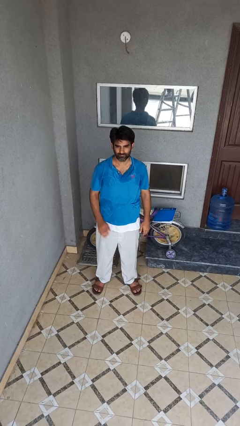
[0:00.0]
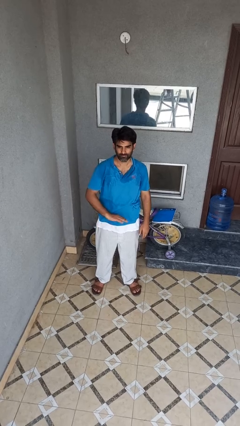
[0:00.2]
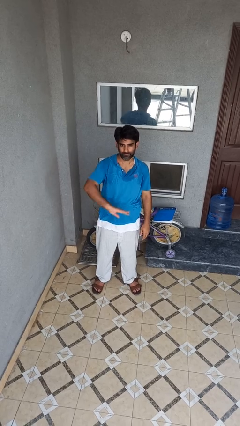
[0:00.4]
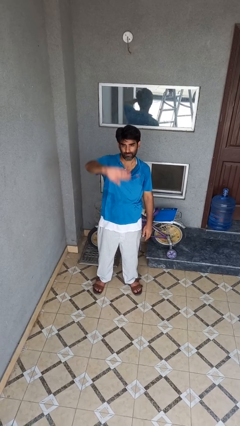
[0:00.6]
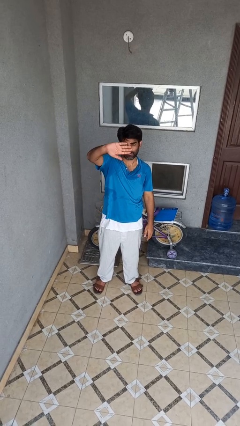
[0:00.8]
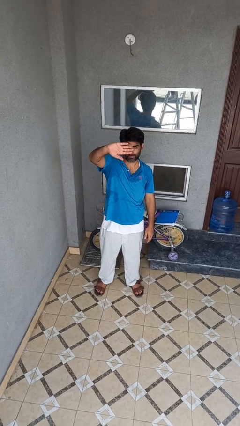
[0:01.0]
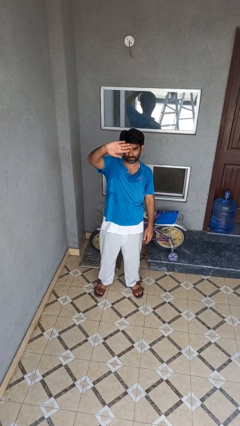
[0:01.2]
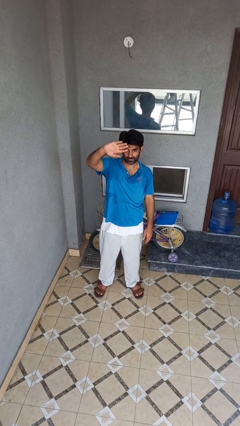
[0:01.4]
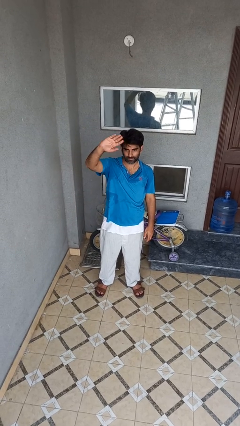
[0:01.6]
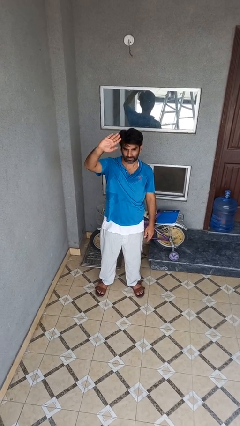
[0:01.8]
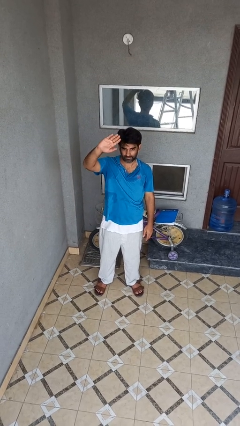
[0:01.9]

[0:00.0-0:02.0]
person gestures swipe up

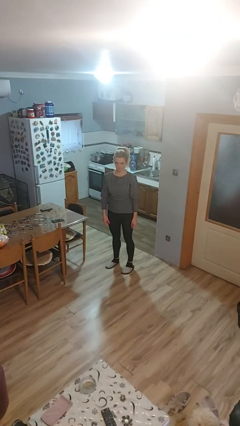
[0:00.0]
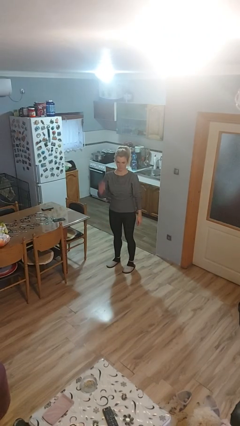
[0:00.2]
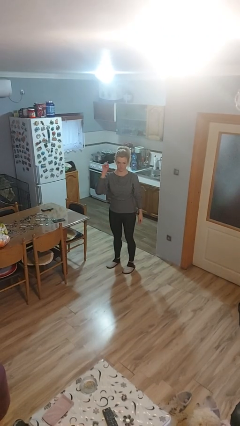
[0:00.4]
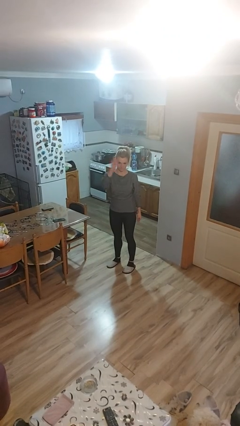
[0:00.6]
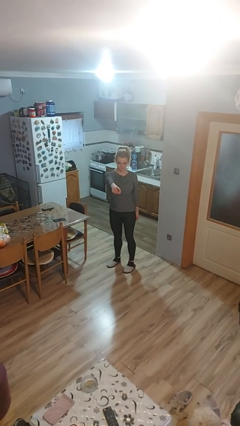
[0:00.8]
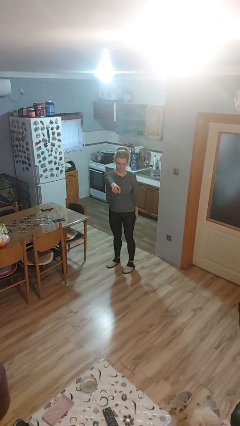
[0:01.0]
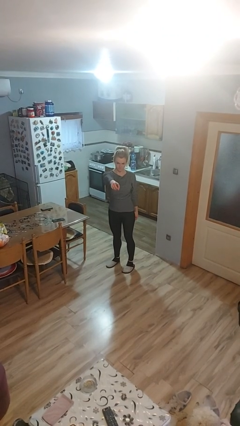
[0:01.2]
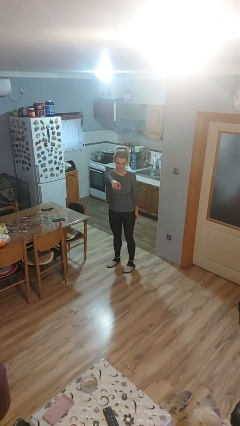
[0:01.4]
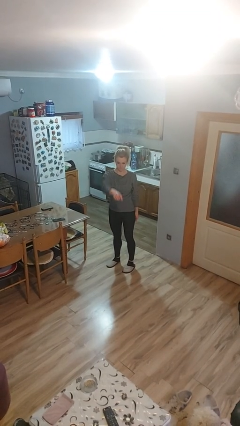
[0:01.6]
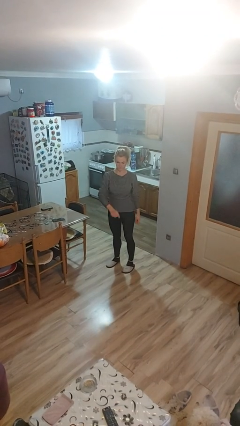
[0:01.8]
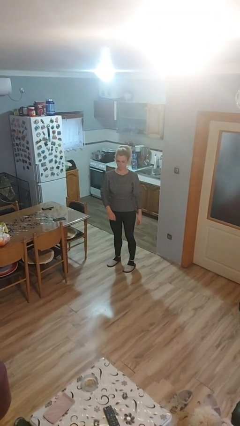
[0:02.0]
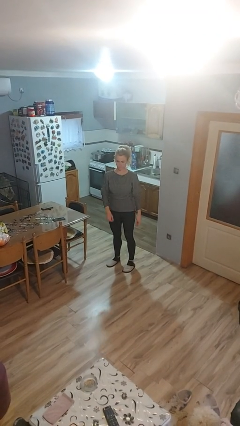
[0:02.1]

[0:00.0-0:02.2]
person points at person

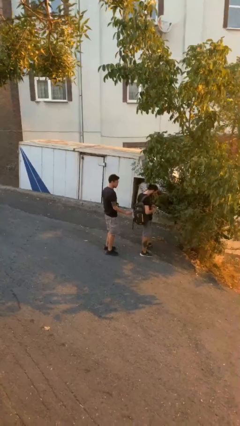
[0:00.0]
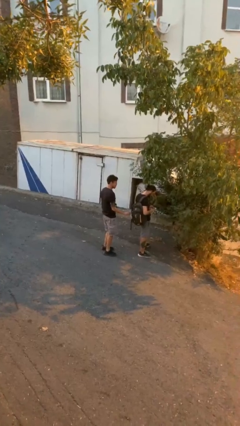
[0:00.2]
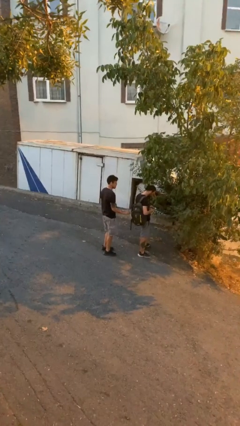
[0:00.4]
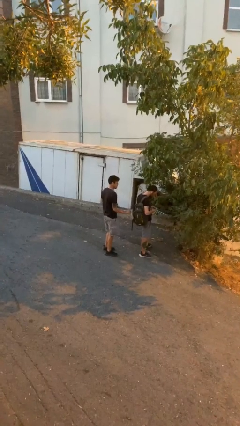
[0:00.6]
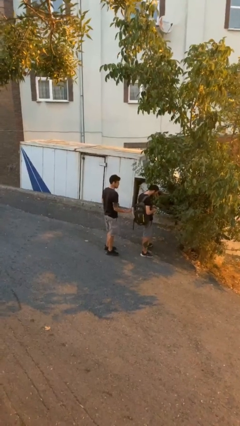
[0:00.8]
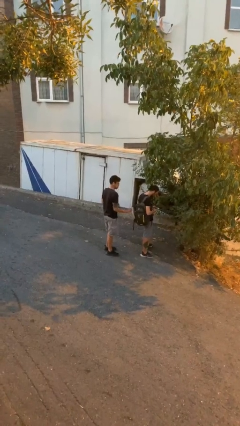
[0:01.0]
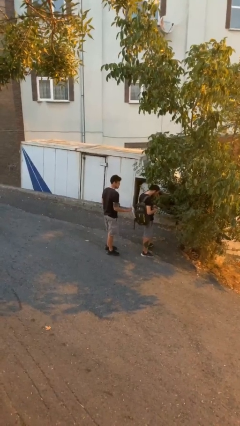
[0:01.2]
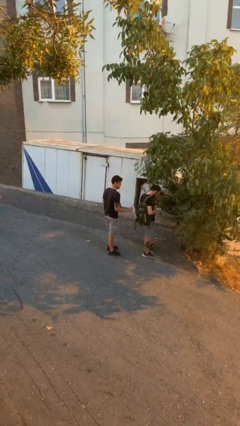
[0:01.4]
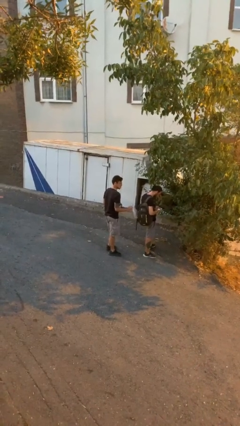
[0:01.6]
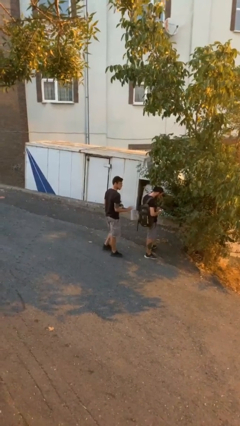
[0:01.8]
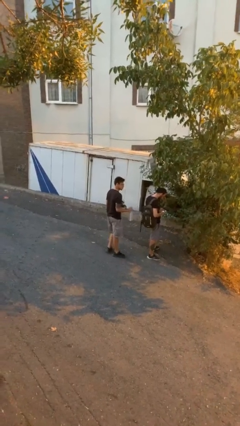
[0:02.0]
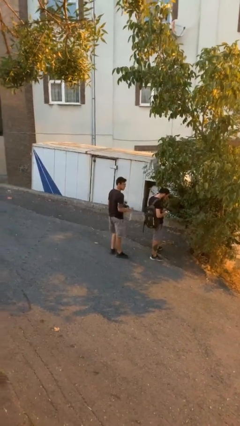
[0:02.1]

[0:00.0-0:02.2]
person steals object from person

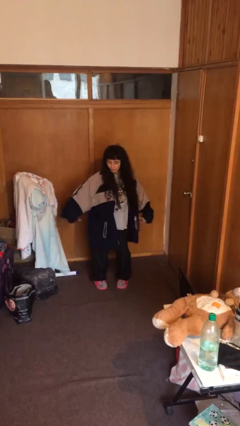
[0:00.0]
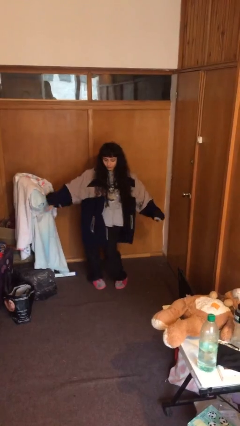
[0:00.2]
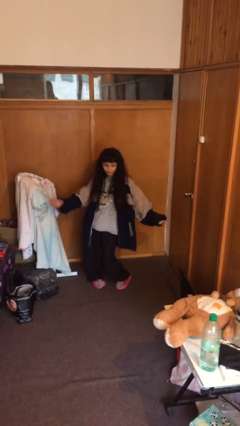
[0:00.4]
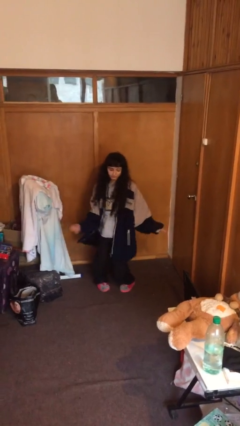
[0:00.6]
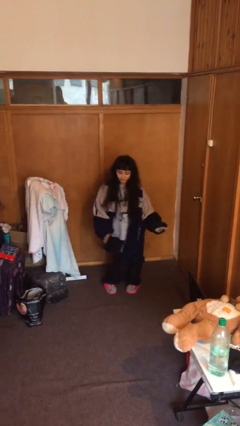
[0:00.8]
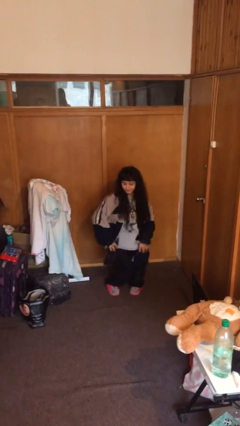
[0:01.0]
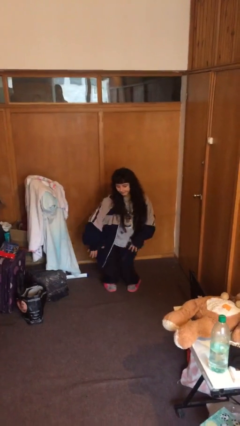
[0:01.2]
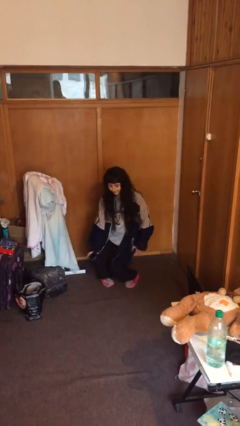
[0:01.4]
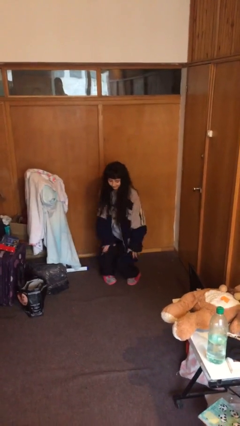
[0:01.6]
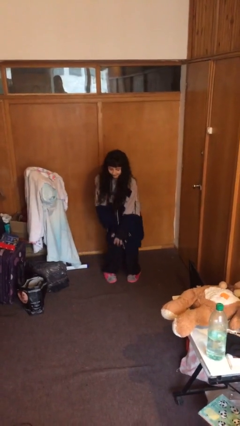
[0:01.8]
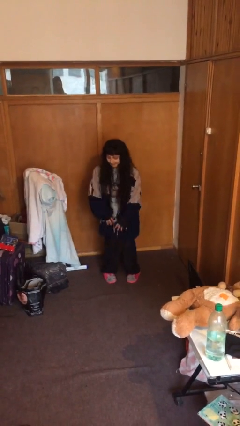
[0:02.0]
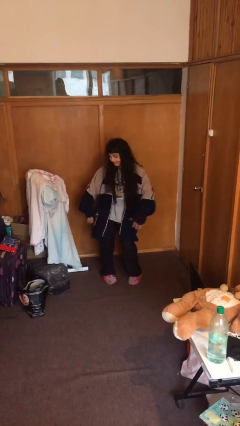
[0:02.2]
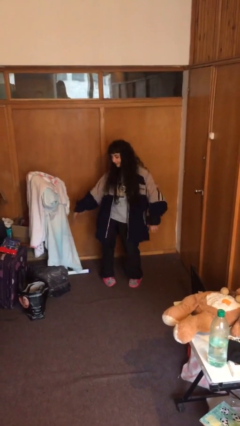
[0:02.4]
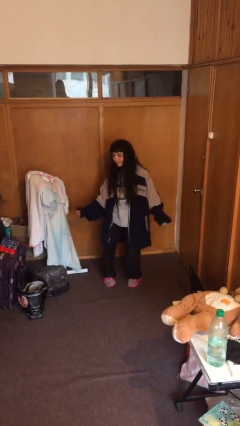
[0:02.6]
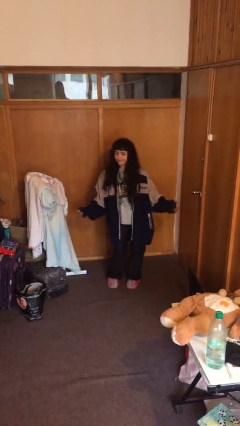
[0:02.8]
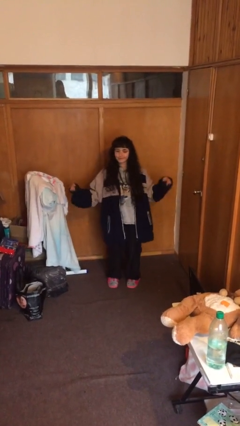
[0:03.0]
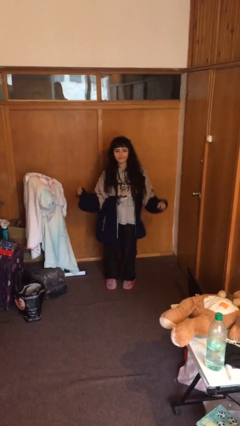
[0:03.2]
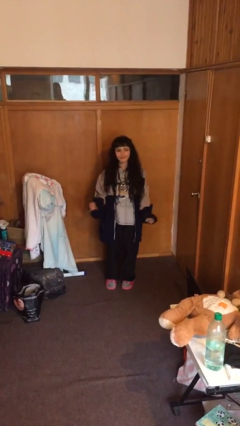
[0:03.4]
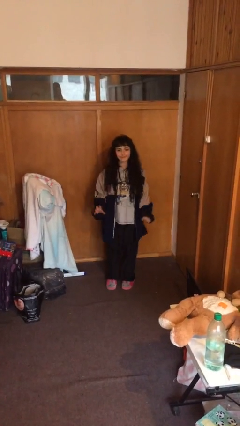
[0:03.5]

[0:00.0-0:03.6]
person dances in place

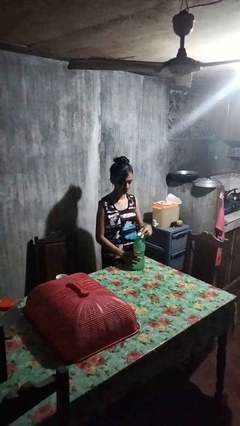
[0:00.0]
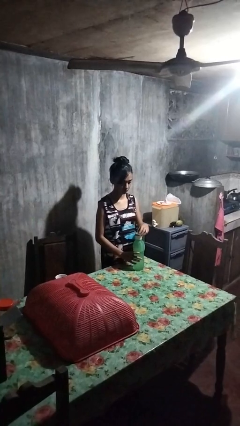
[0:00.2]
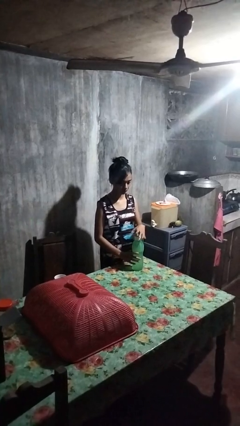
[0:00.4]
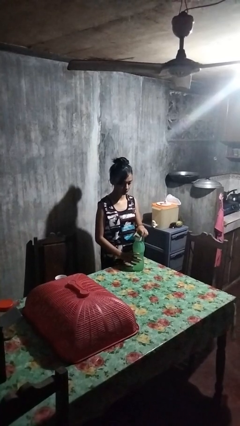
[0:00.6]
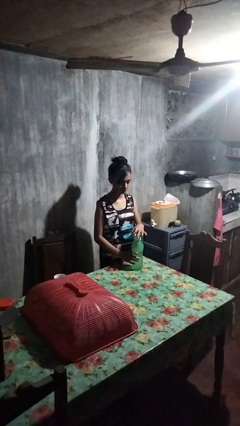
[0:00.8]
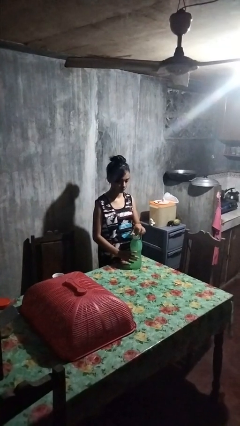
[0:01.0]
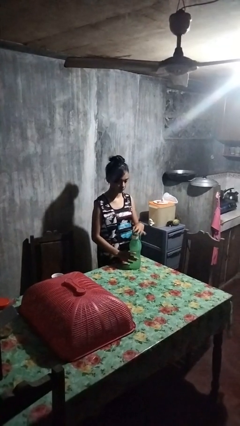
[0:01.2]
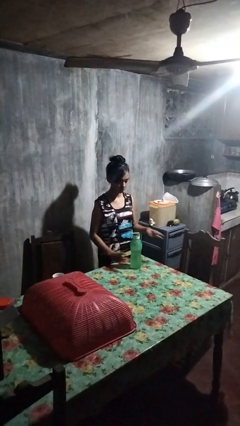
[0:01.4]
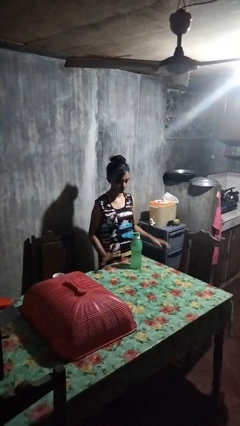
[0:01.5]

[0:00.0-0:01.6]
person screws lid to bottle

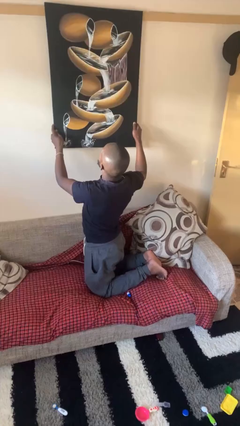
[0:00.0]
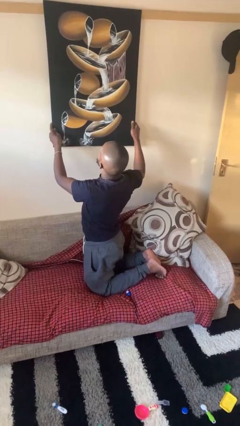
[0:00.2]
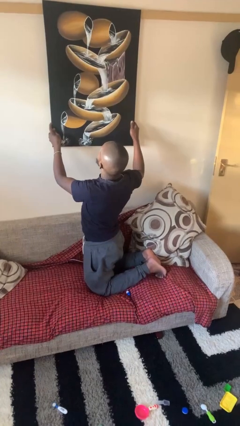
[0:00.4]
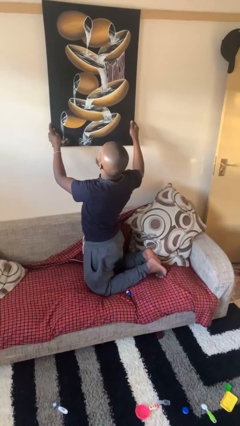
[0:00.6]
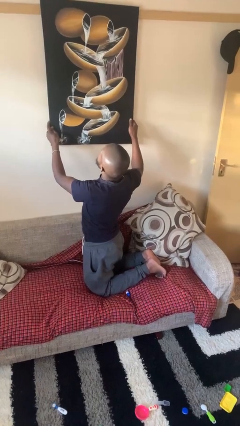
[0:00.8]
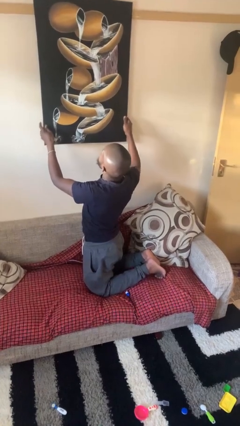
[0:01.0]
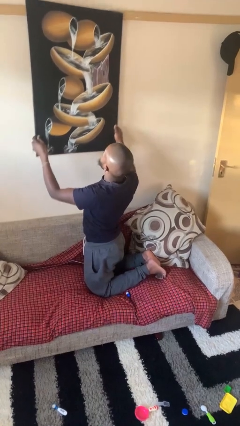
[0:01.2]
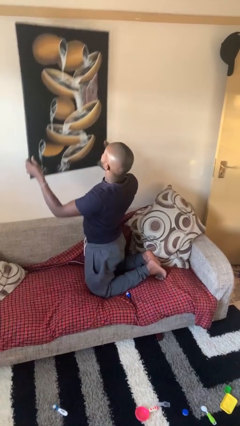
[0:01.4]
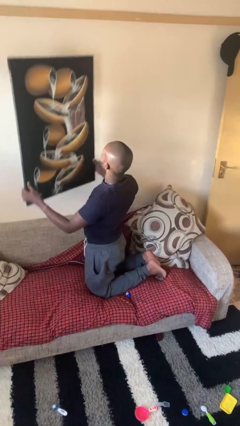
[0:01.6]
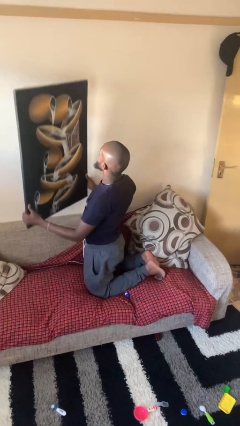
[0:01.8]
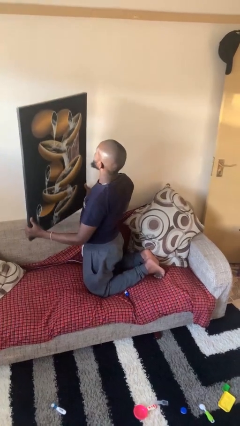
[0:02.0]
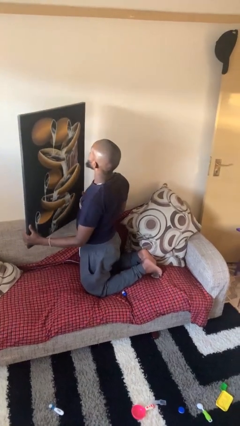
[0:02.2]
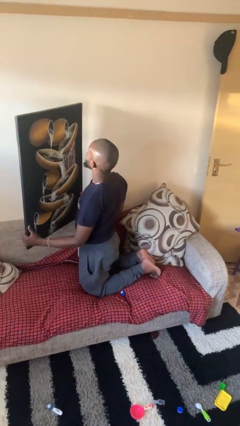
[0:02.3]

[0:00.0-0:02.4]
person takes down picture frame

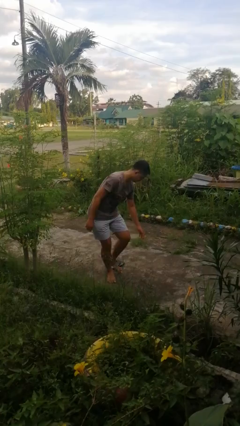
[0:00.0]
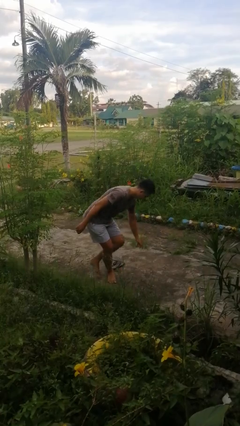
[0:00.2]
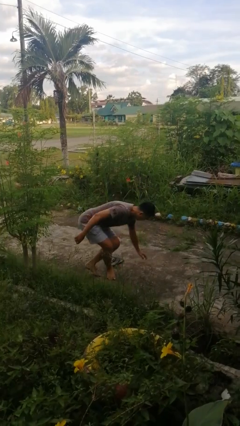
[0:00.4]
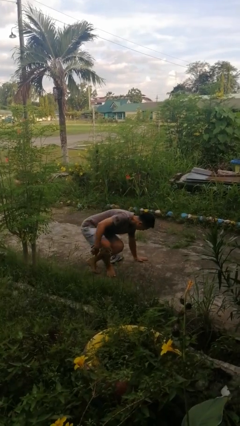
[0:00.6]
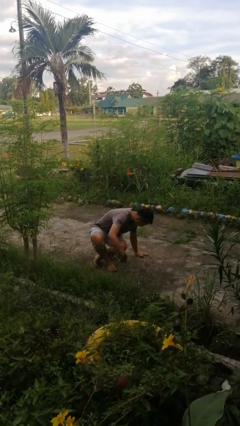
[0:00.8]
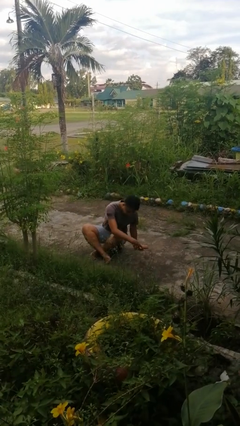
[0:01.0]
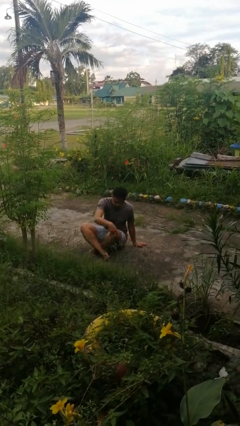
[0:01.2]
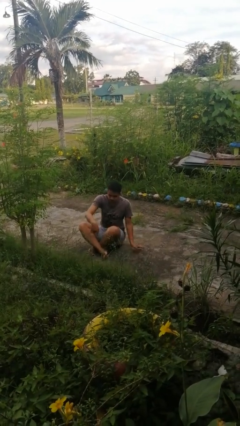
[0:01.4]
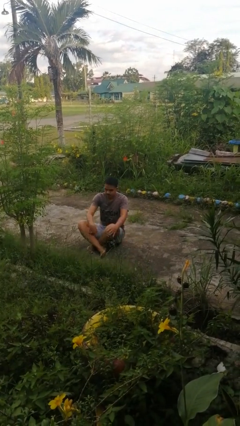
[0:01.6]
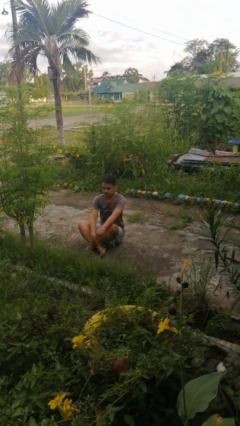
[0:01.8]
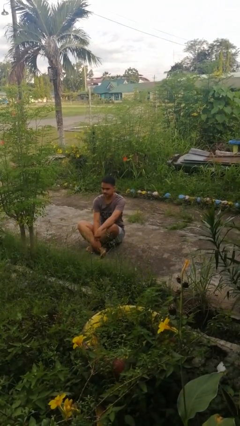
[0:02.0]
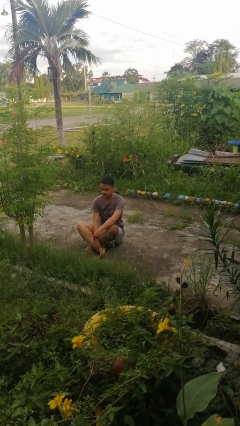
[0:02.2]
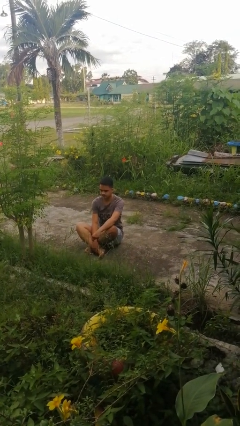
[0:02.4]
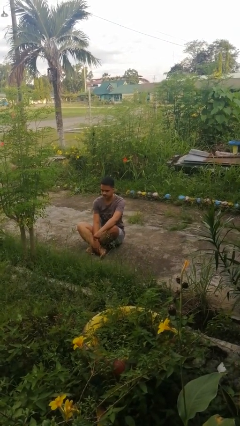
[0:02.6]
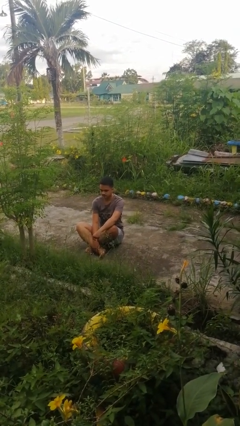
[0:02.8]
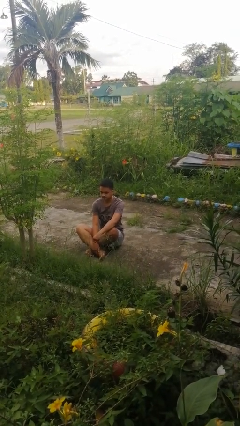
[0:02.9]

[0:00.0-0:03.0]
person sits crisscross
